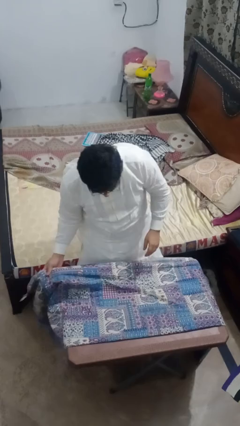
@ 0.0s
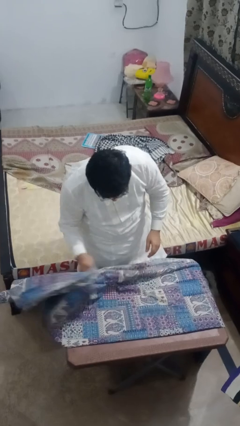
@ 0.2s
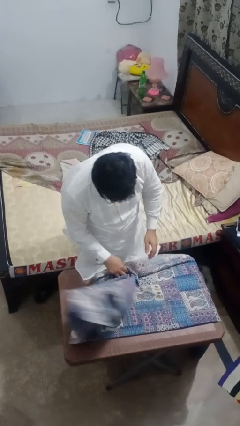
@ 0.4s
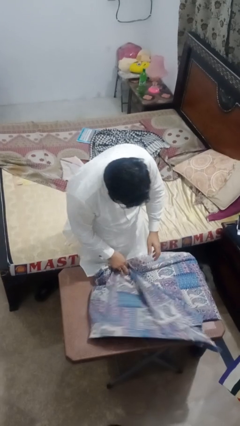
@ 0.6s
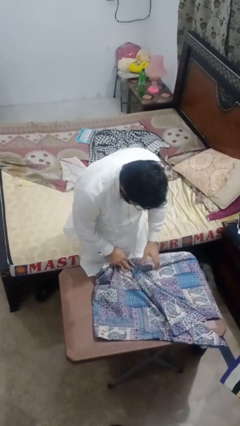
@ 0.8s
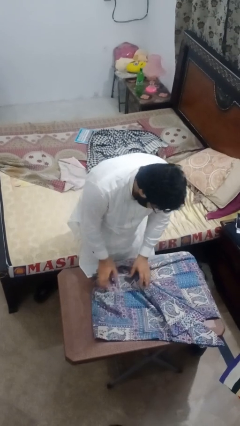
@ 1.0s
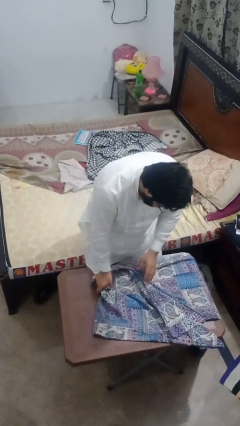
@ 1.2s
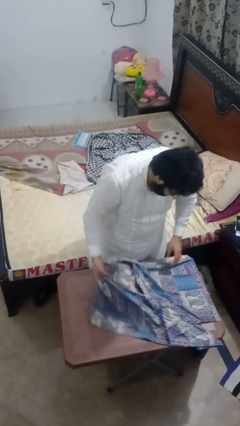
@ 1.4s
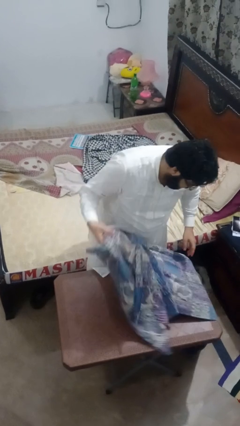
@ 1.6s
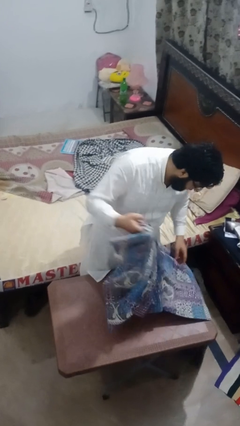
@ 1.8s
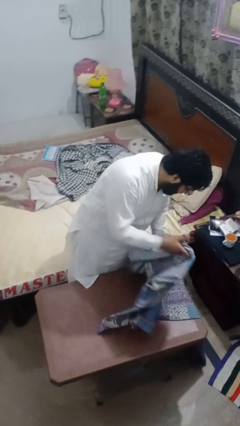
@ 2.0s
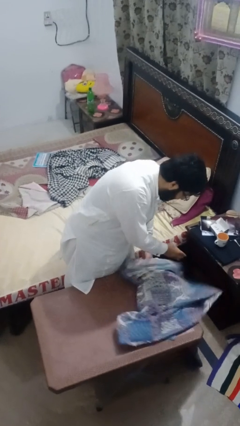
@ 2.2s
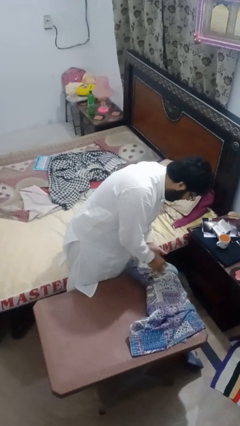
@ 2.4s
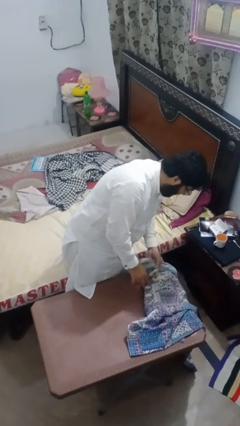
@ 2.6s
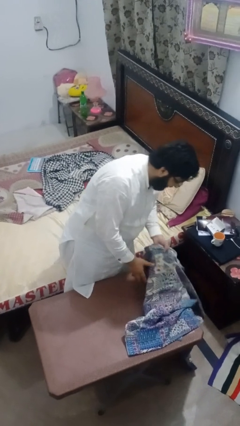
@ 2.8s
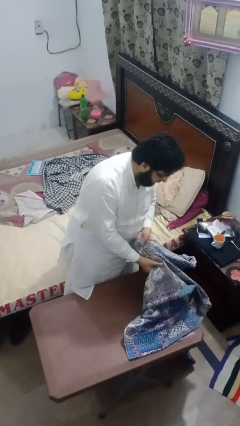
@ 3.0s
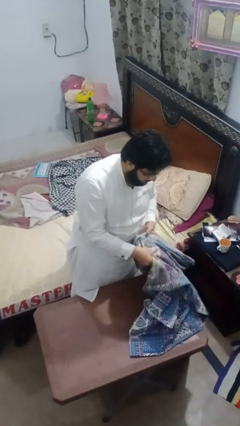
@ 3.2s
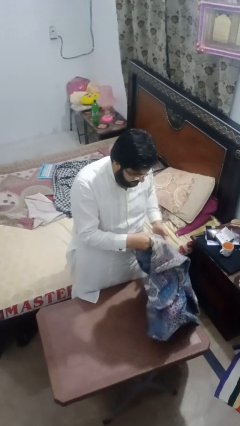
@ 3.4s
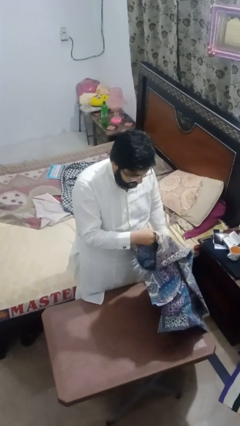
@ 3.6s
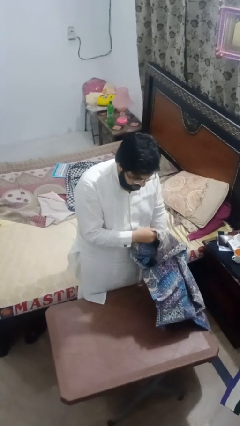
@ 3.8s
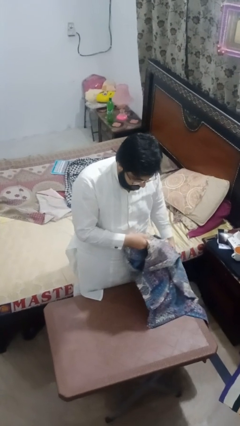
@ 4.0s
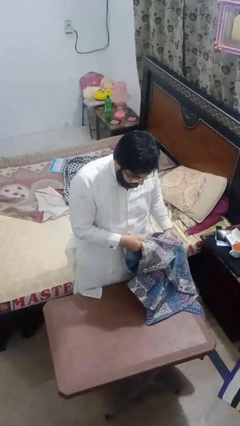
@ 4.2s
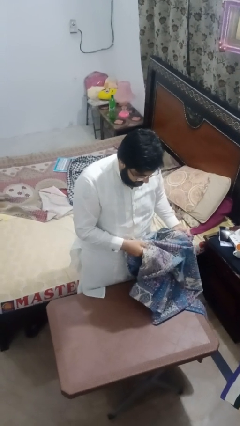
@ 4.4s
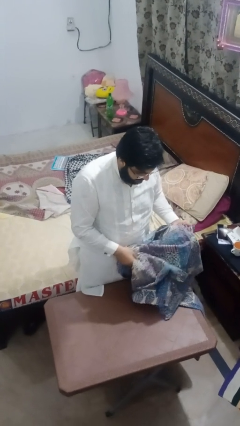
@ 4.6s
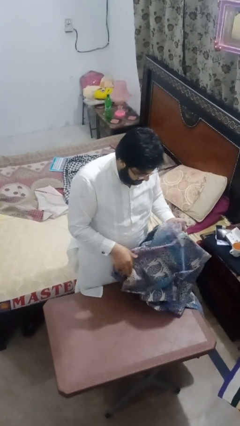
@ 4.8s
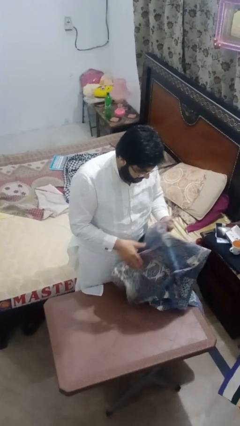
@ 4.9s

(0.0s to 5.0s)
person folds tablecloth

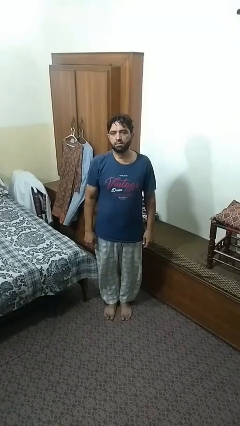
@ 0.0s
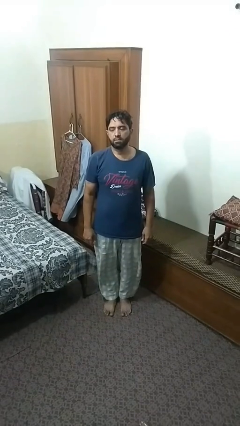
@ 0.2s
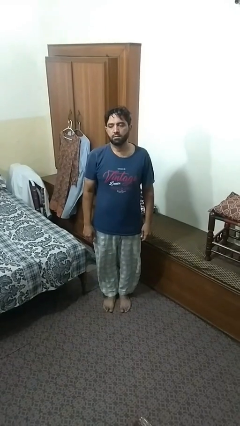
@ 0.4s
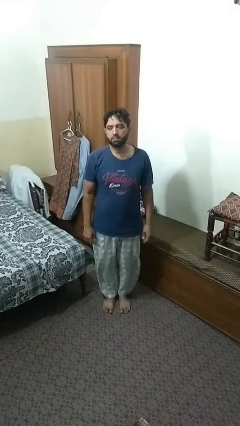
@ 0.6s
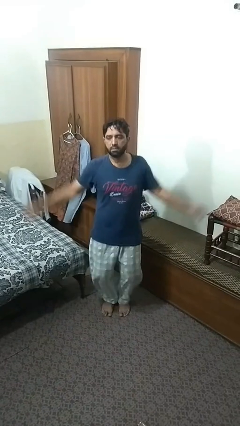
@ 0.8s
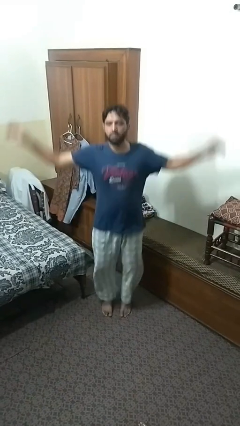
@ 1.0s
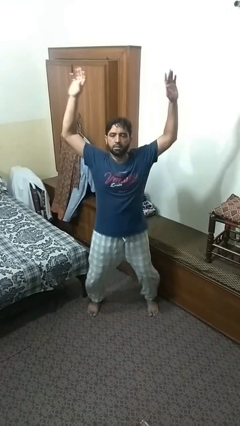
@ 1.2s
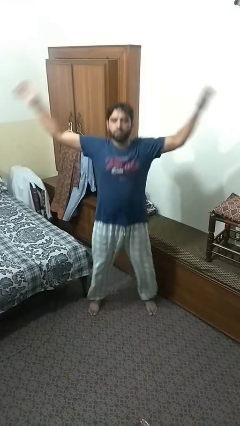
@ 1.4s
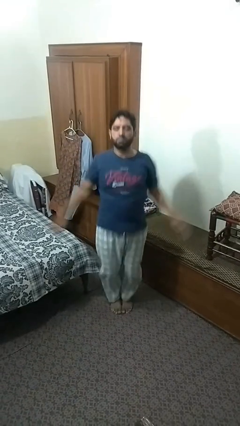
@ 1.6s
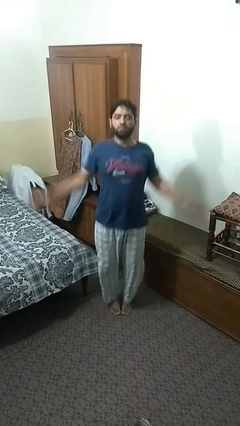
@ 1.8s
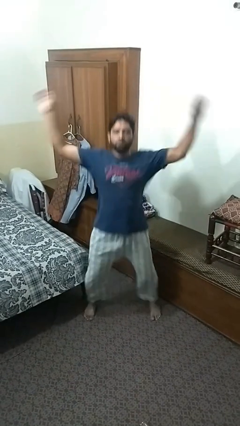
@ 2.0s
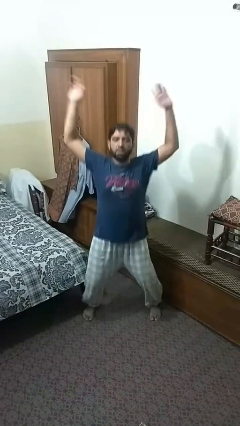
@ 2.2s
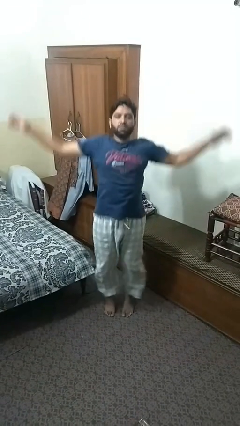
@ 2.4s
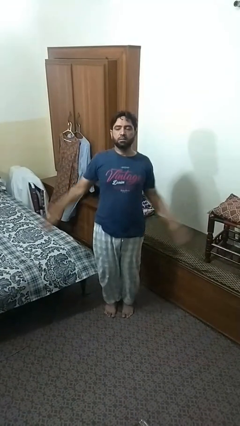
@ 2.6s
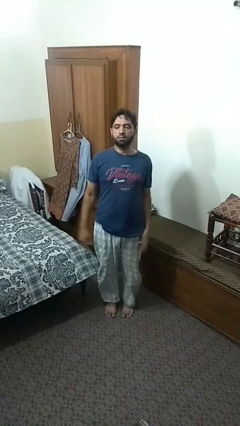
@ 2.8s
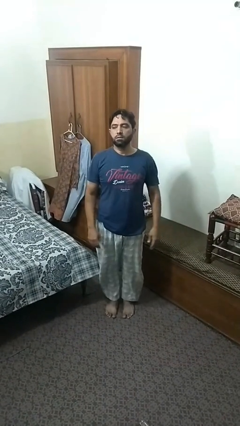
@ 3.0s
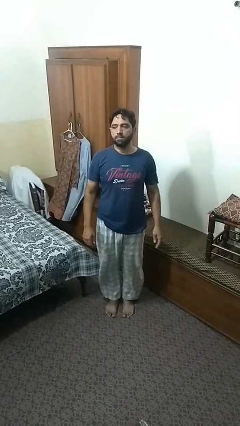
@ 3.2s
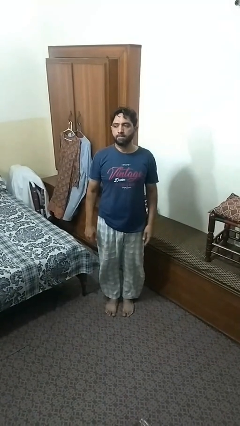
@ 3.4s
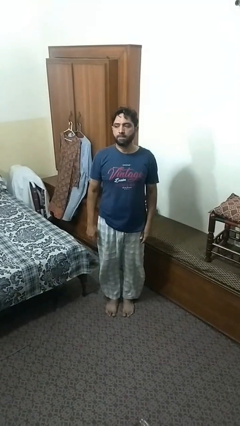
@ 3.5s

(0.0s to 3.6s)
person exercises with jumping jacks

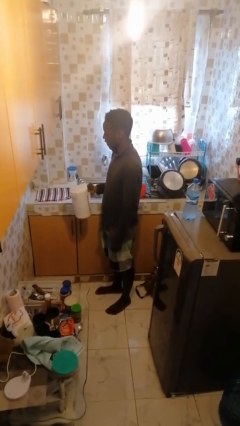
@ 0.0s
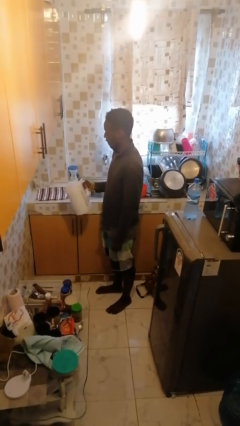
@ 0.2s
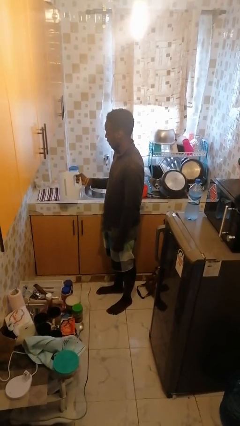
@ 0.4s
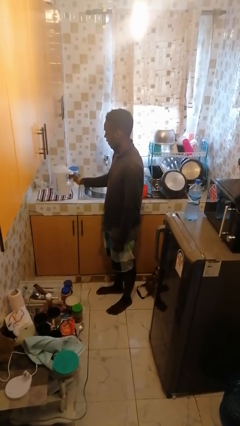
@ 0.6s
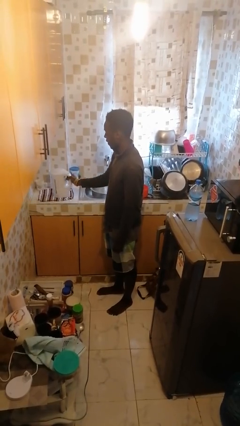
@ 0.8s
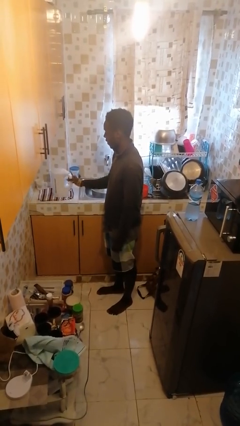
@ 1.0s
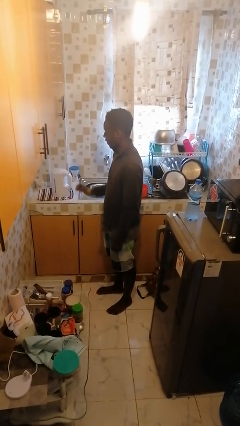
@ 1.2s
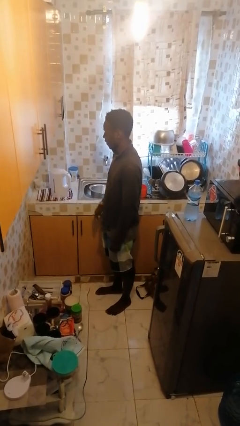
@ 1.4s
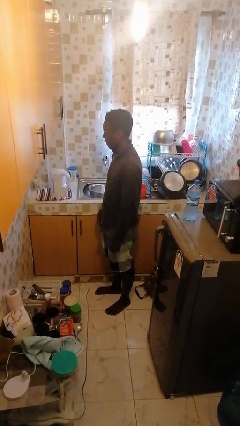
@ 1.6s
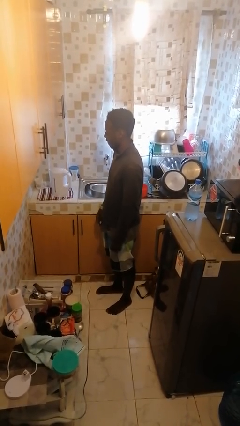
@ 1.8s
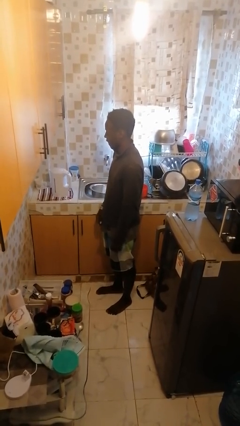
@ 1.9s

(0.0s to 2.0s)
person puts down object on countertop

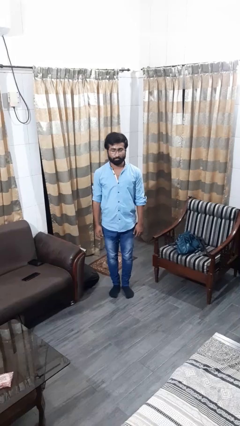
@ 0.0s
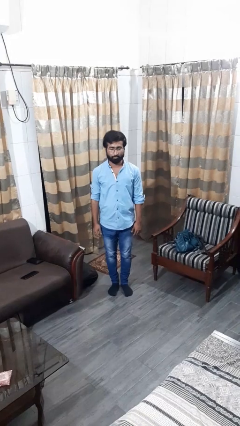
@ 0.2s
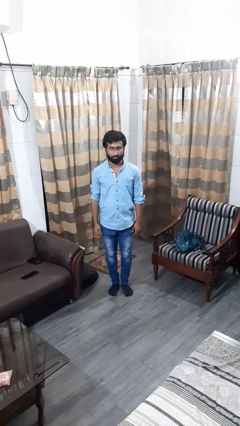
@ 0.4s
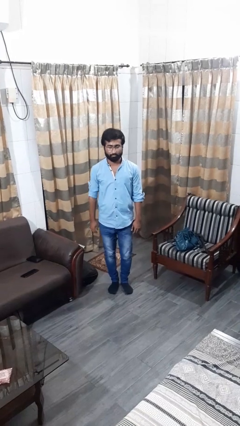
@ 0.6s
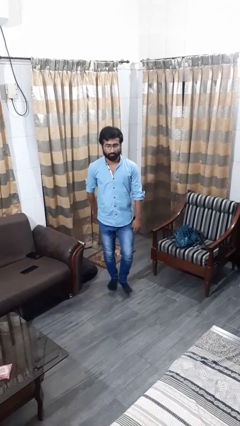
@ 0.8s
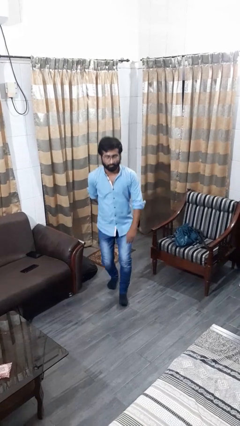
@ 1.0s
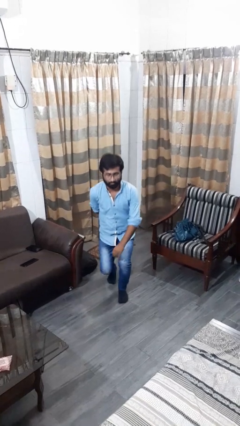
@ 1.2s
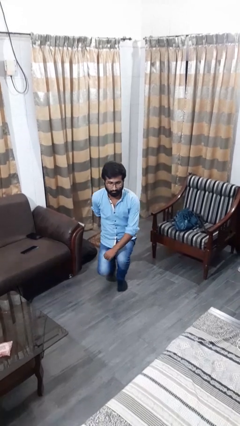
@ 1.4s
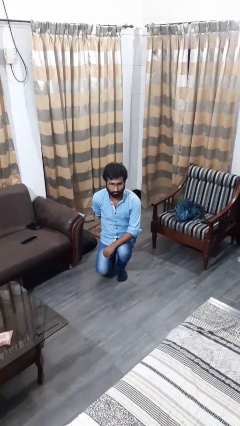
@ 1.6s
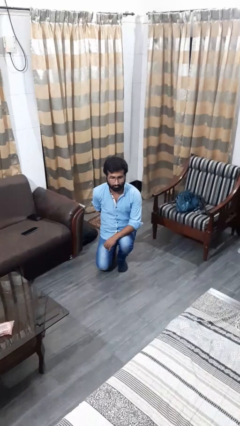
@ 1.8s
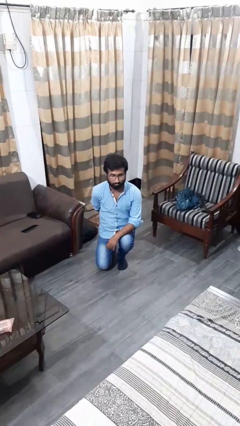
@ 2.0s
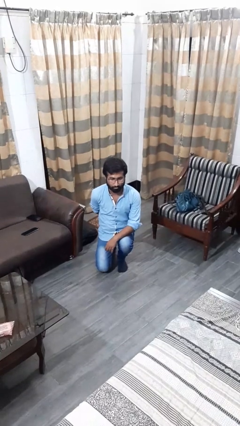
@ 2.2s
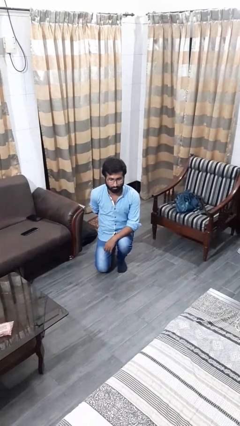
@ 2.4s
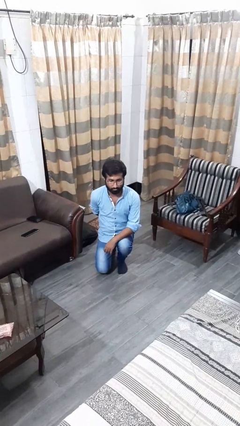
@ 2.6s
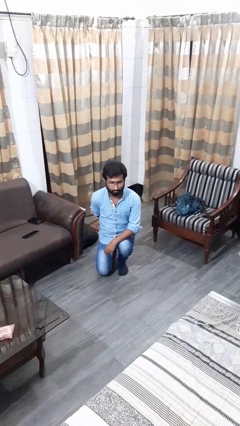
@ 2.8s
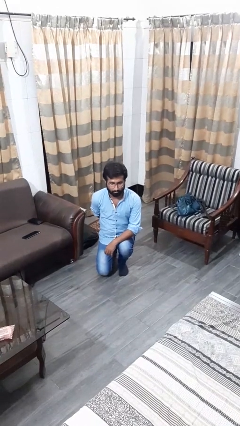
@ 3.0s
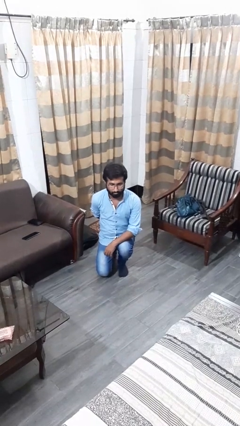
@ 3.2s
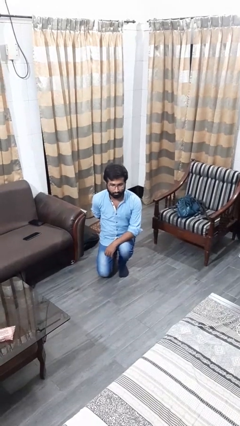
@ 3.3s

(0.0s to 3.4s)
person kneels

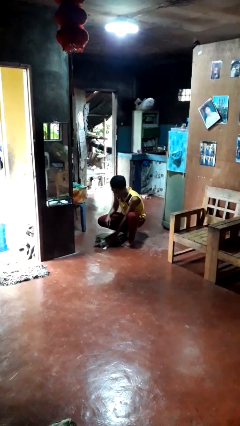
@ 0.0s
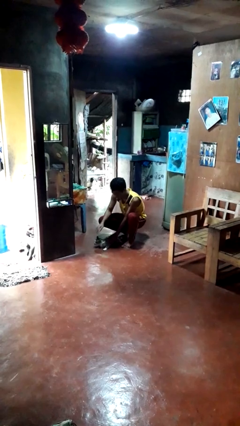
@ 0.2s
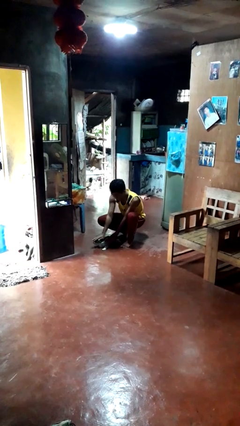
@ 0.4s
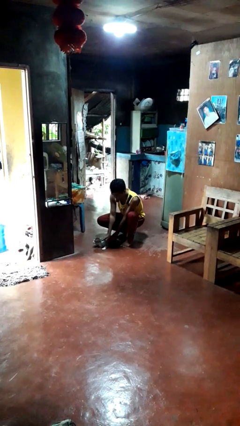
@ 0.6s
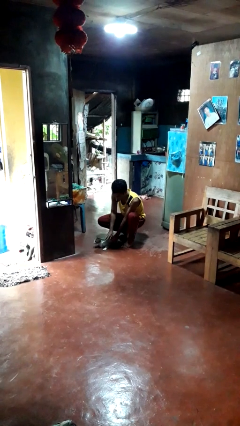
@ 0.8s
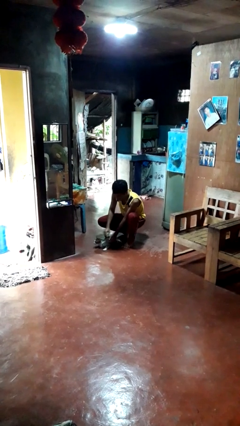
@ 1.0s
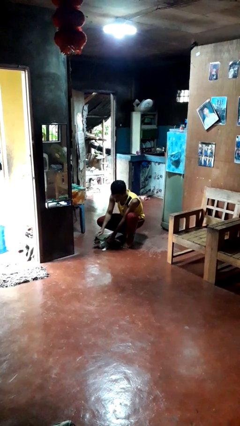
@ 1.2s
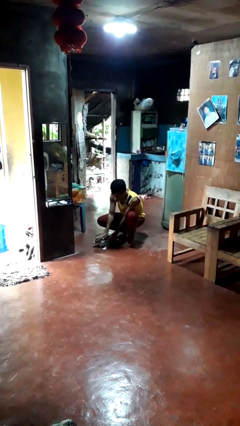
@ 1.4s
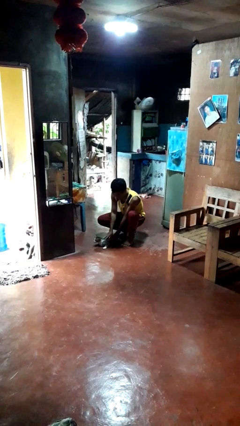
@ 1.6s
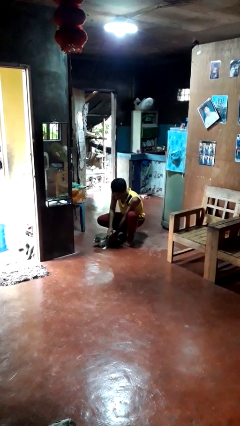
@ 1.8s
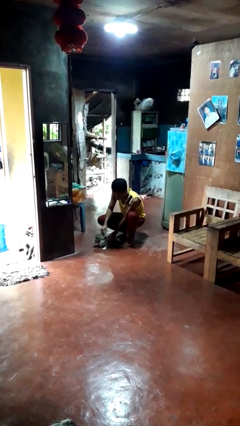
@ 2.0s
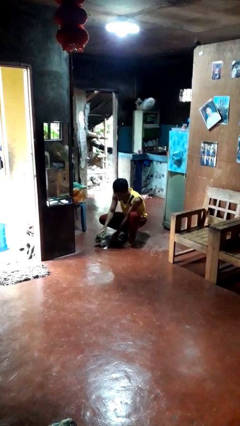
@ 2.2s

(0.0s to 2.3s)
person pets cat

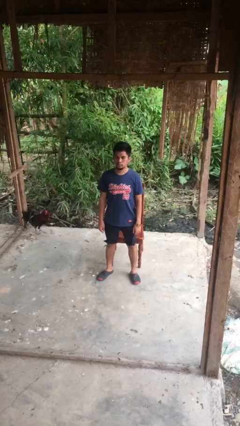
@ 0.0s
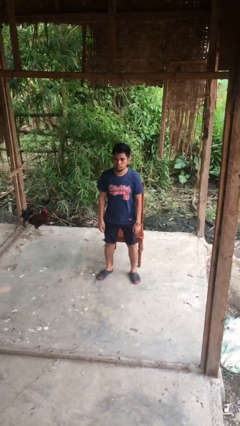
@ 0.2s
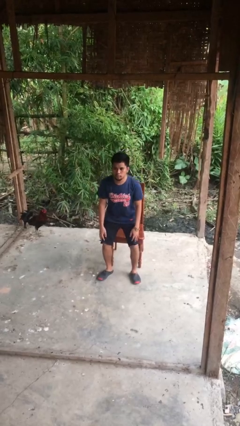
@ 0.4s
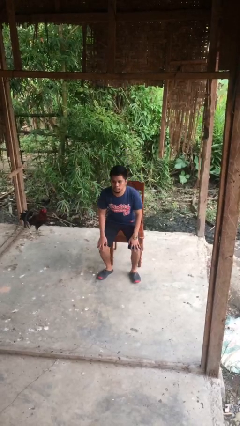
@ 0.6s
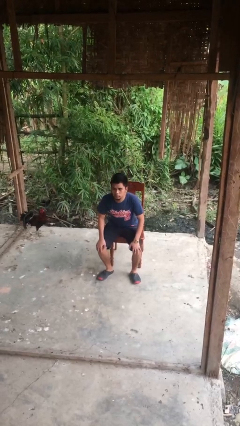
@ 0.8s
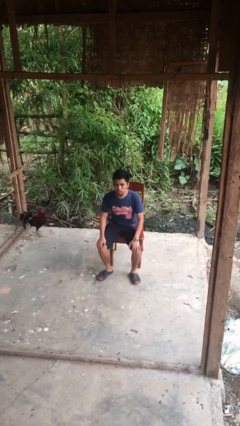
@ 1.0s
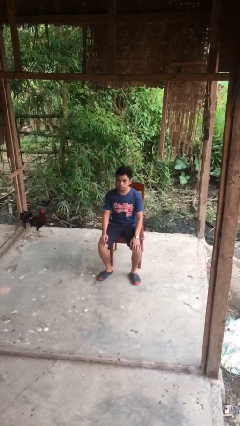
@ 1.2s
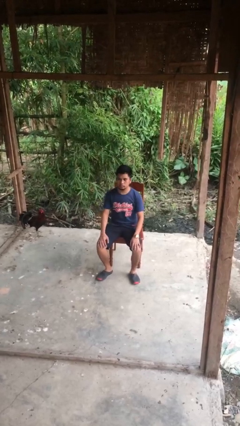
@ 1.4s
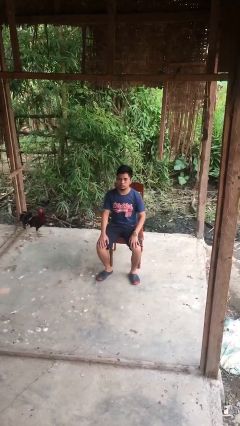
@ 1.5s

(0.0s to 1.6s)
person sits down
